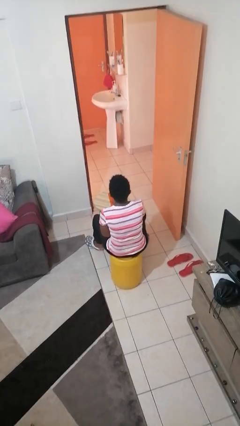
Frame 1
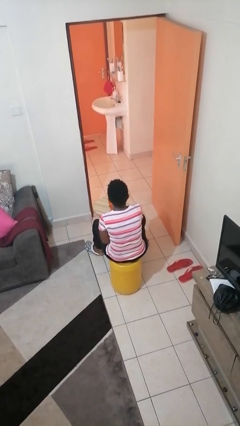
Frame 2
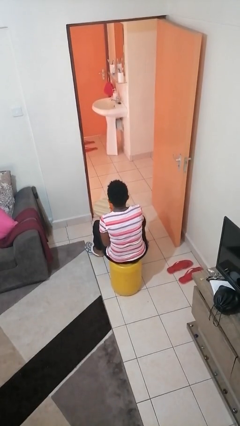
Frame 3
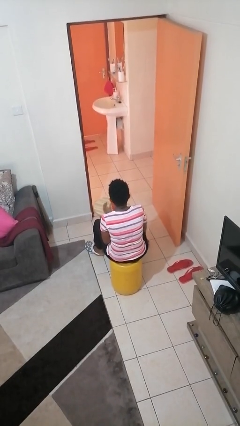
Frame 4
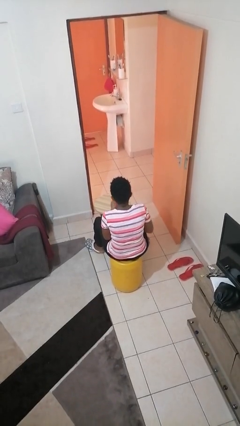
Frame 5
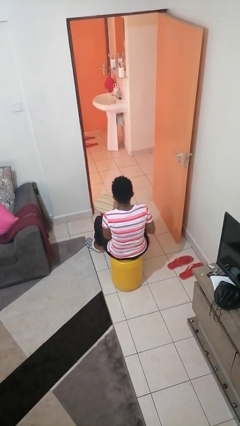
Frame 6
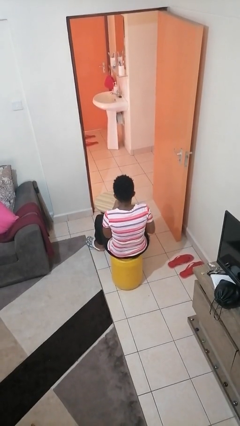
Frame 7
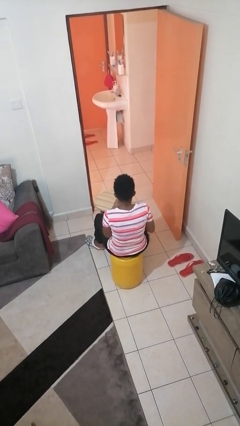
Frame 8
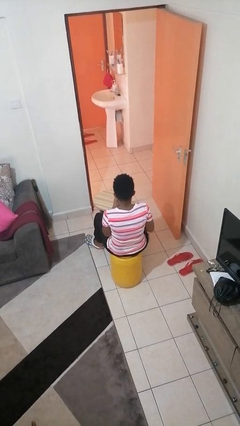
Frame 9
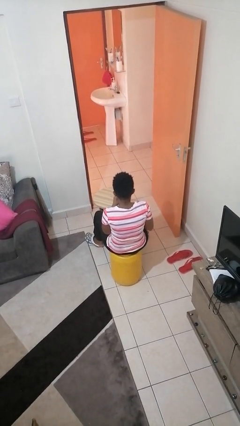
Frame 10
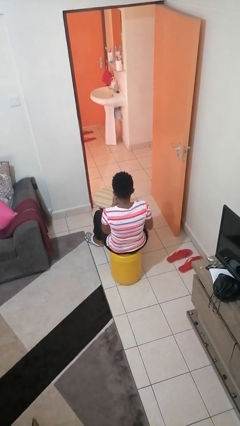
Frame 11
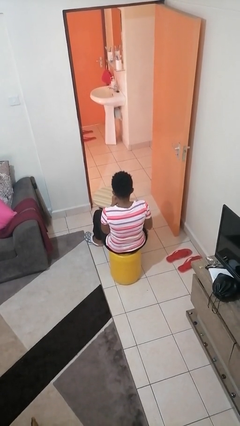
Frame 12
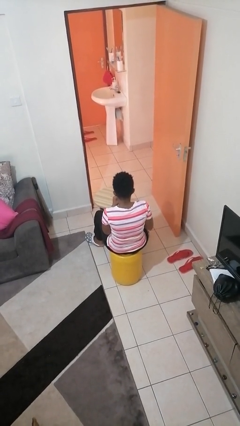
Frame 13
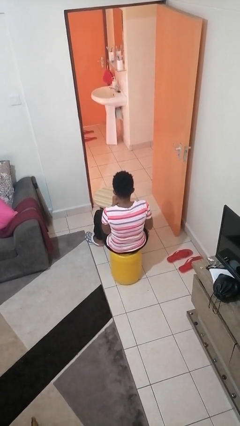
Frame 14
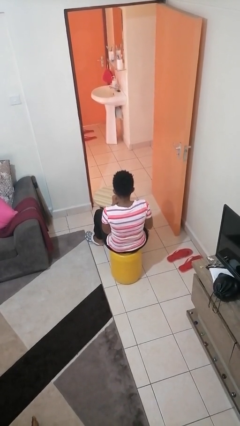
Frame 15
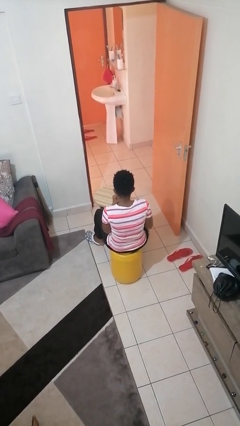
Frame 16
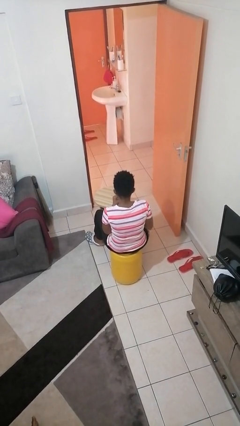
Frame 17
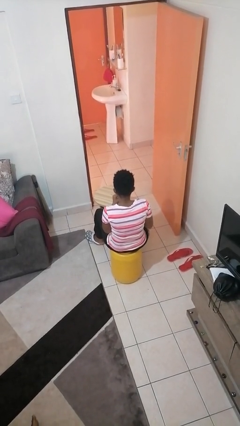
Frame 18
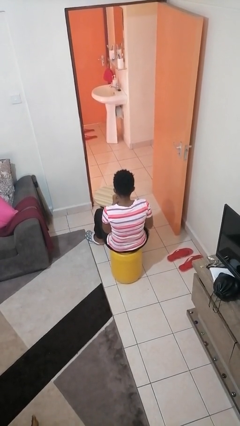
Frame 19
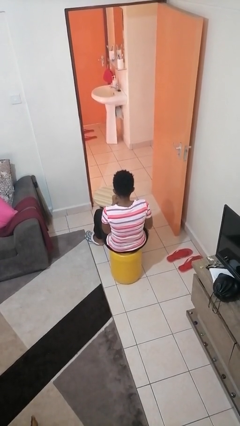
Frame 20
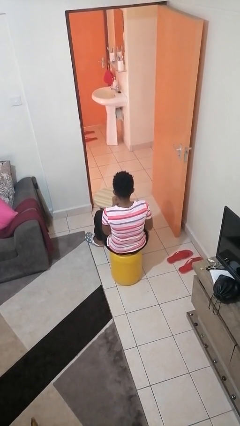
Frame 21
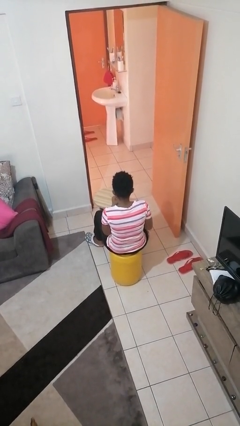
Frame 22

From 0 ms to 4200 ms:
person drinks from straw

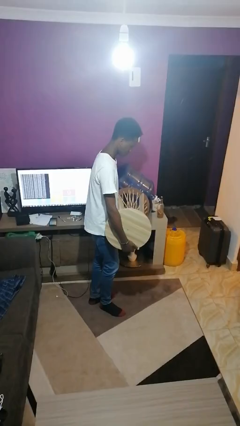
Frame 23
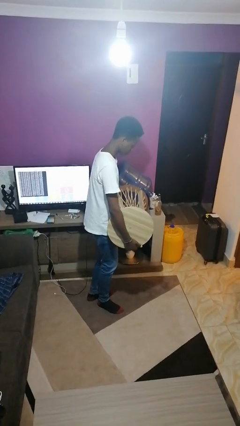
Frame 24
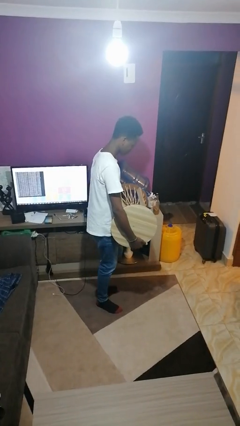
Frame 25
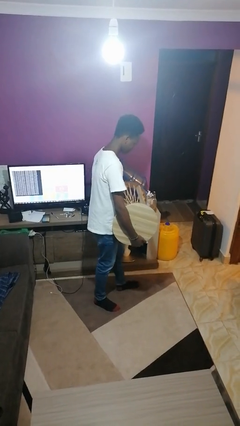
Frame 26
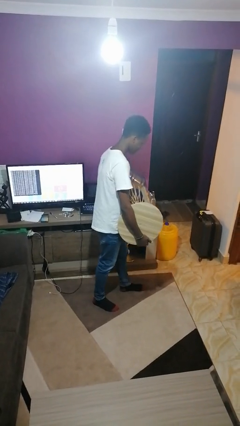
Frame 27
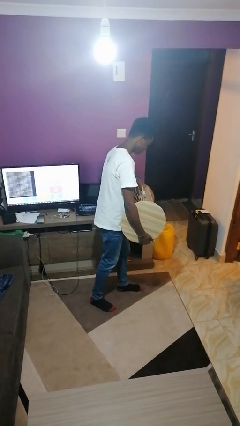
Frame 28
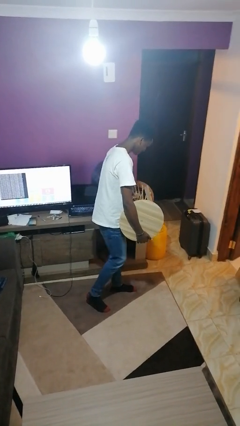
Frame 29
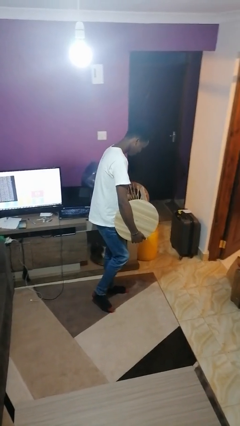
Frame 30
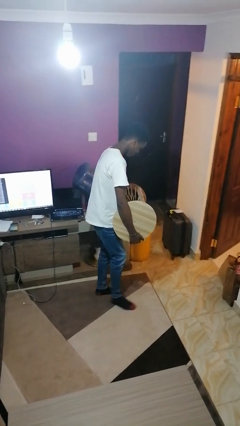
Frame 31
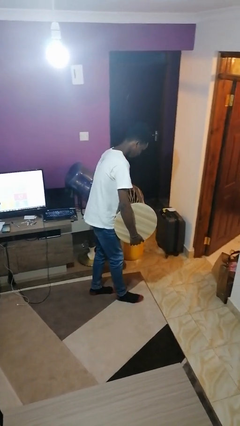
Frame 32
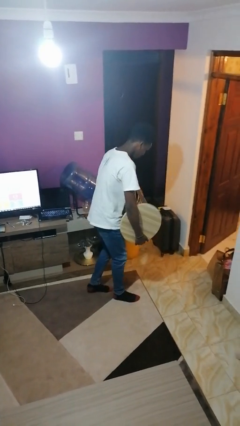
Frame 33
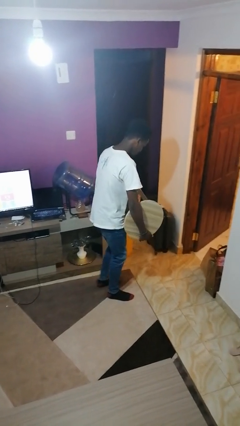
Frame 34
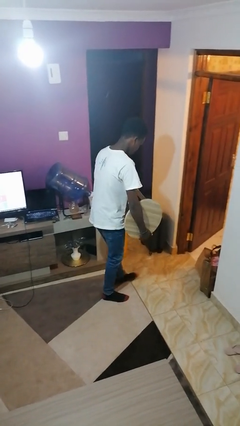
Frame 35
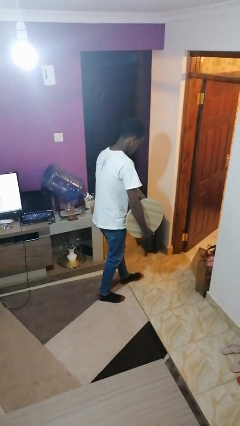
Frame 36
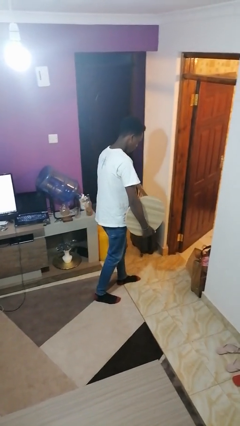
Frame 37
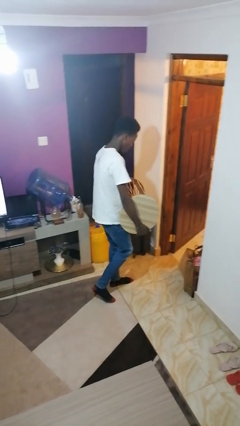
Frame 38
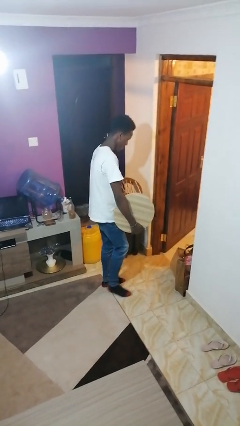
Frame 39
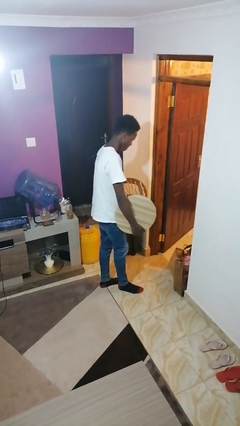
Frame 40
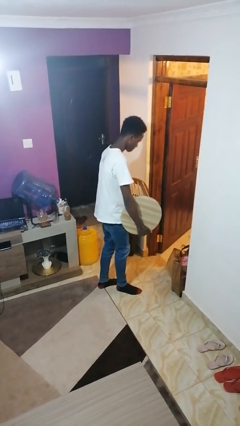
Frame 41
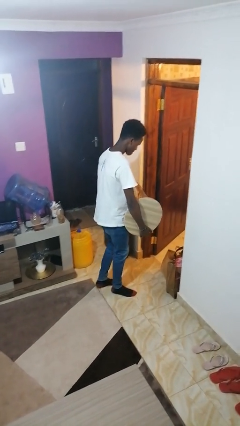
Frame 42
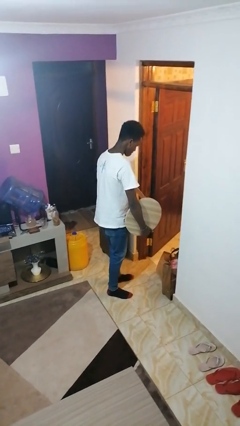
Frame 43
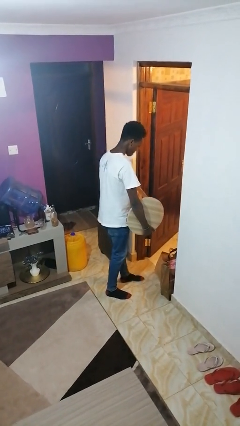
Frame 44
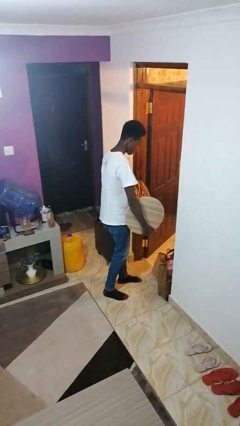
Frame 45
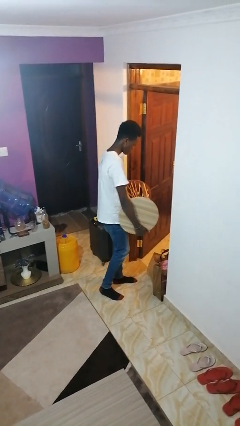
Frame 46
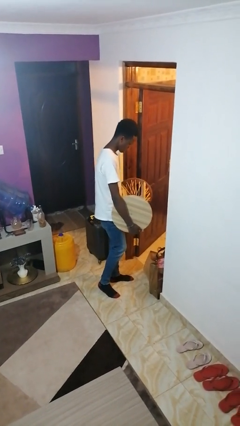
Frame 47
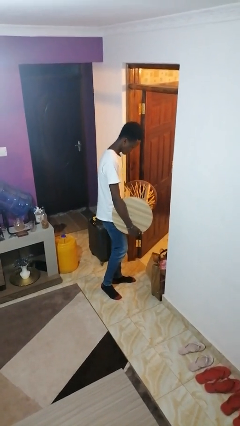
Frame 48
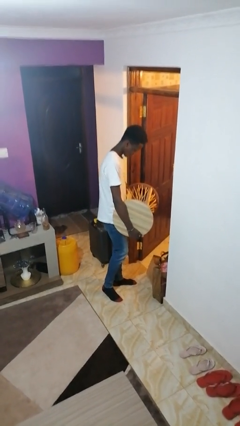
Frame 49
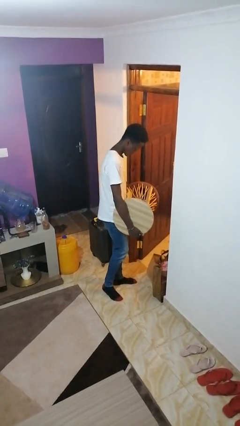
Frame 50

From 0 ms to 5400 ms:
person carries furniture

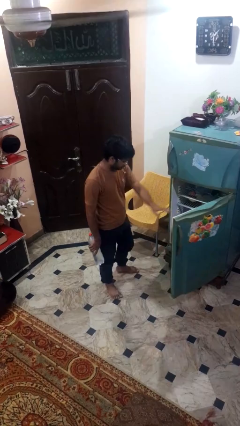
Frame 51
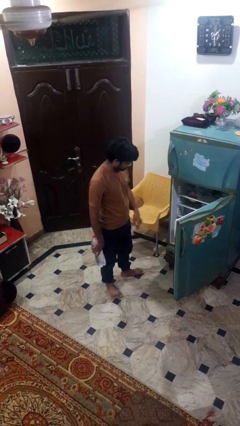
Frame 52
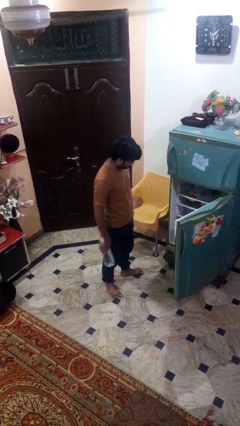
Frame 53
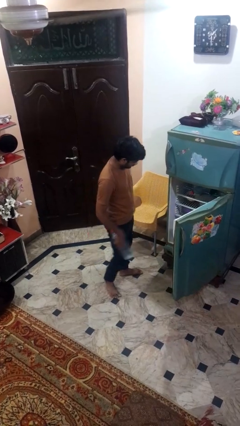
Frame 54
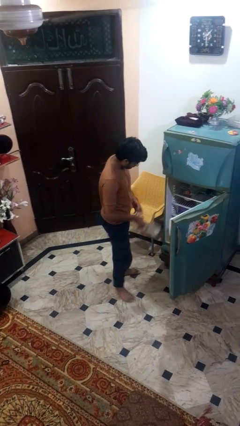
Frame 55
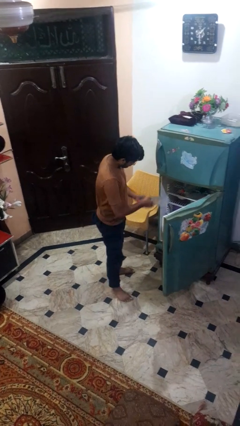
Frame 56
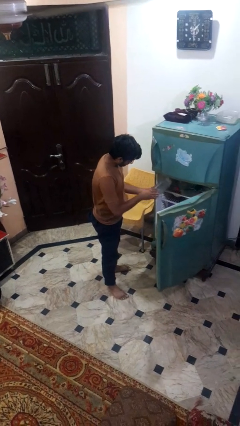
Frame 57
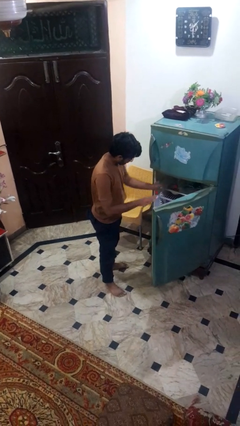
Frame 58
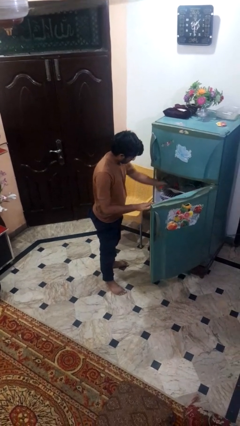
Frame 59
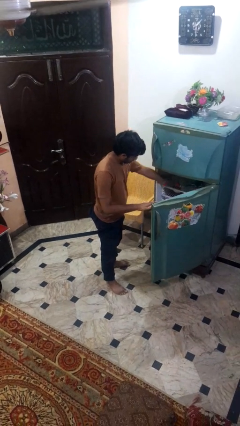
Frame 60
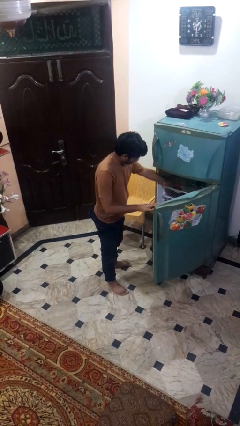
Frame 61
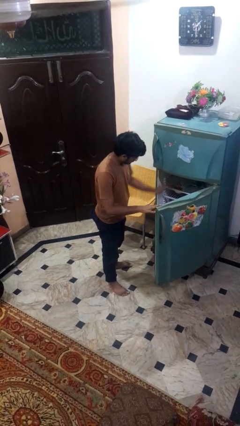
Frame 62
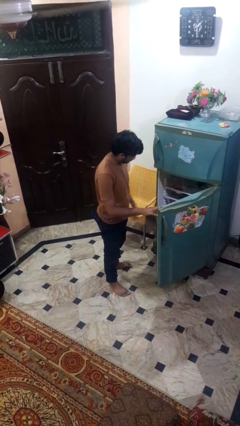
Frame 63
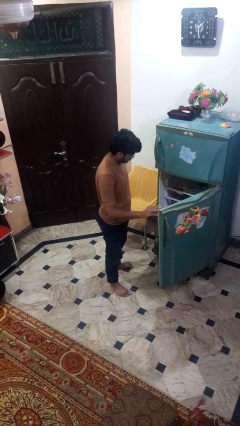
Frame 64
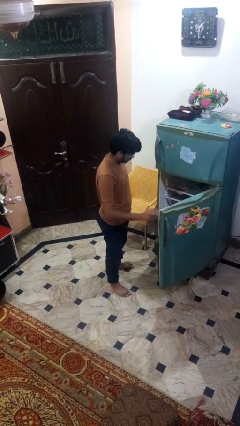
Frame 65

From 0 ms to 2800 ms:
person puts object into refrigerator

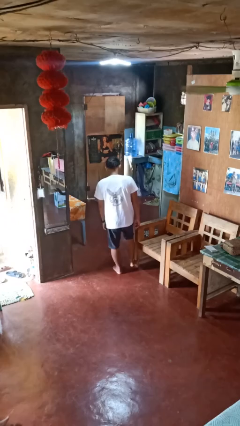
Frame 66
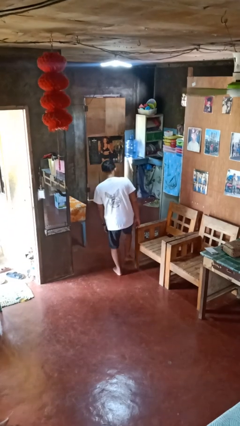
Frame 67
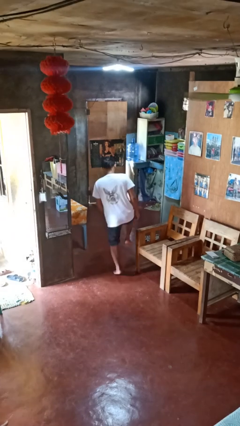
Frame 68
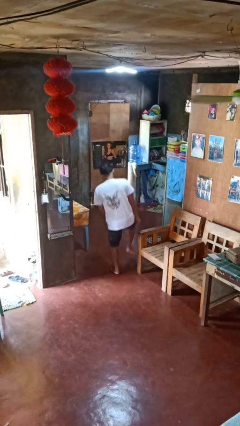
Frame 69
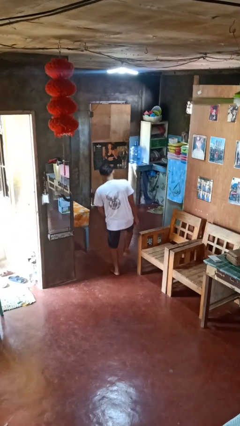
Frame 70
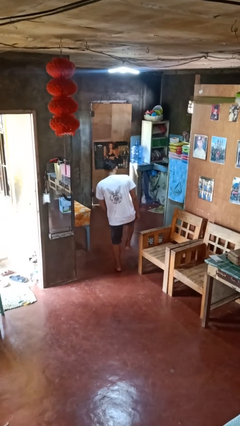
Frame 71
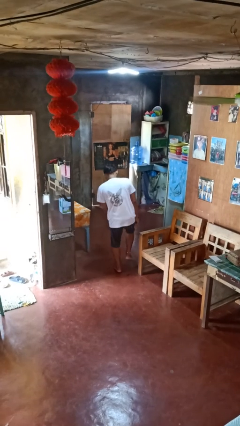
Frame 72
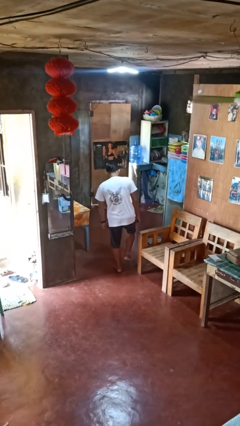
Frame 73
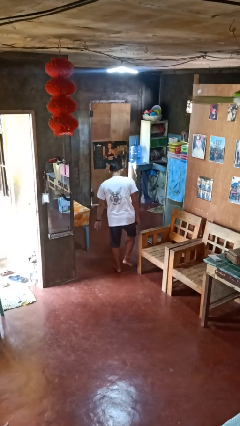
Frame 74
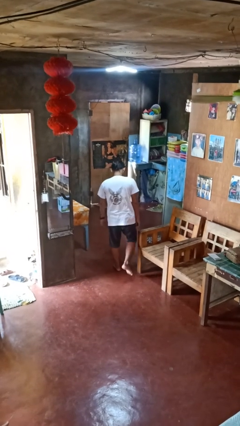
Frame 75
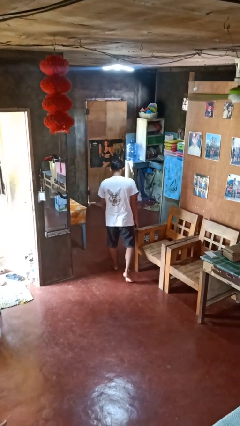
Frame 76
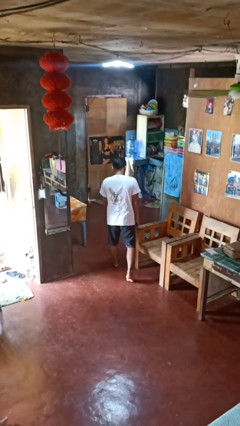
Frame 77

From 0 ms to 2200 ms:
person stubs toe

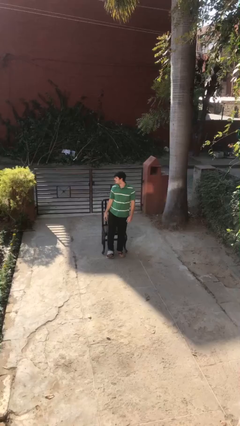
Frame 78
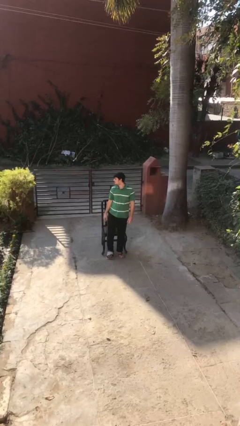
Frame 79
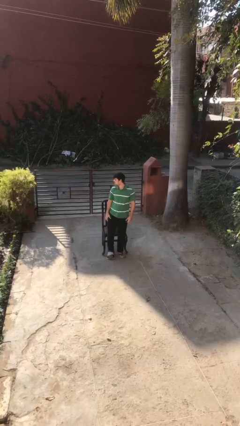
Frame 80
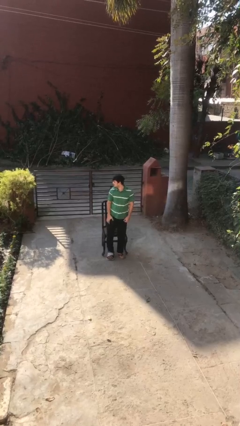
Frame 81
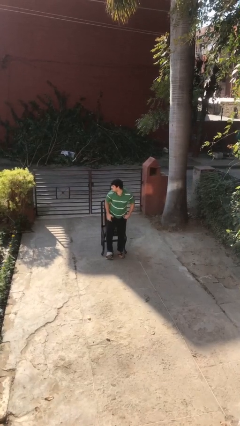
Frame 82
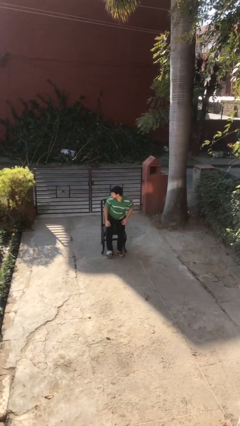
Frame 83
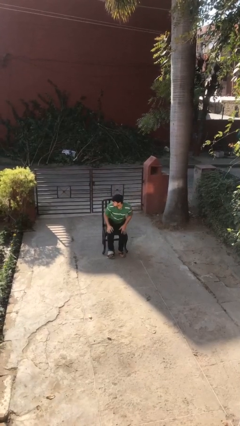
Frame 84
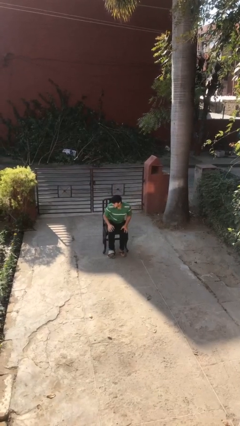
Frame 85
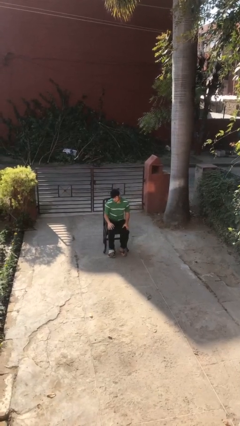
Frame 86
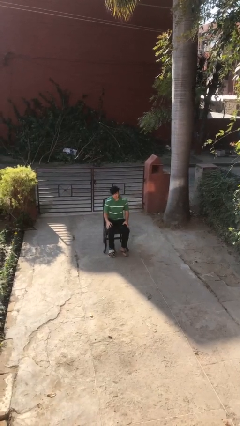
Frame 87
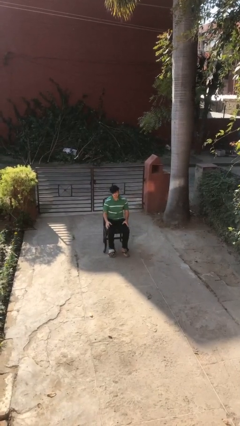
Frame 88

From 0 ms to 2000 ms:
person sits down

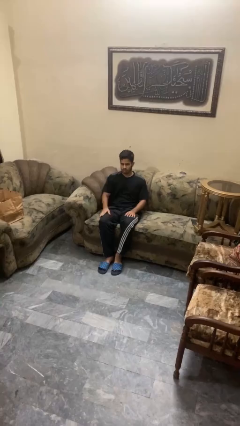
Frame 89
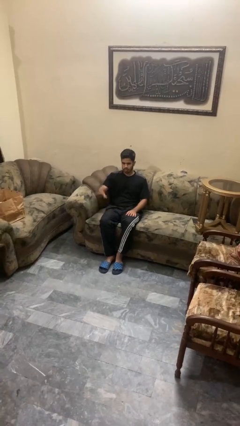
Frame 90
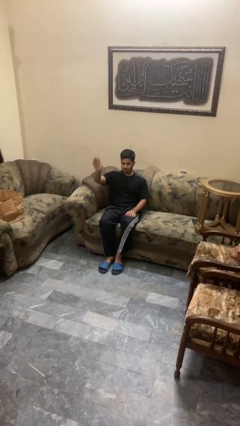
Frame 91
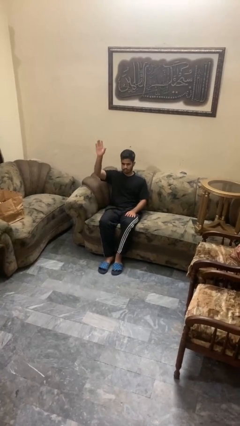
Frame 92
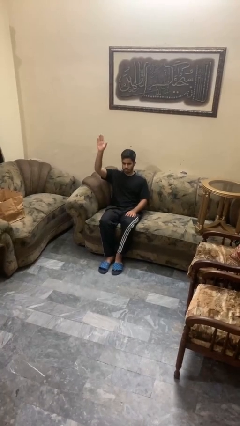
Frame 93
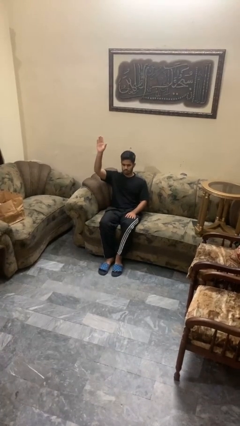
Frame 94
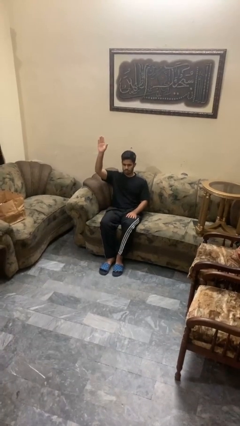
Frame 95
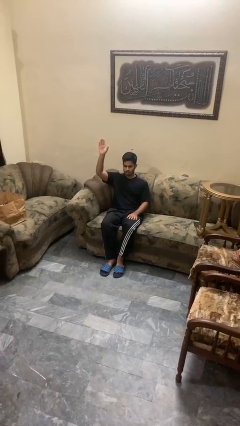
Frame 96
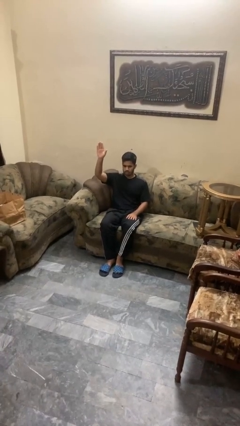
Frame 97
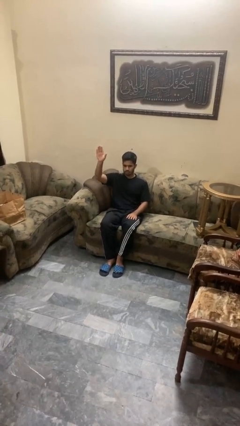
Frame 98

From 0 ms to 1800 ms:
person gestures raise hand
